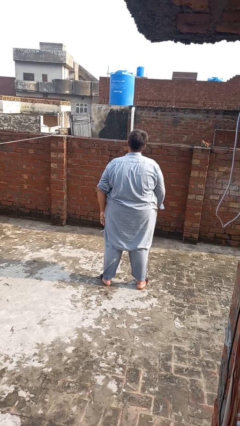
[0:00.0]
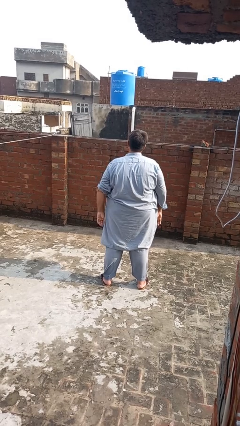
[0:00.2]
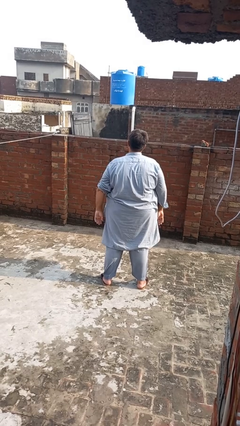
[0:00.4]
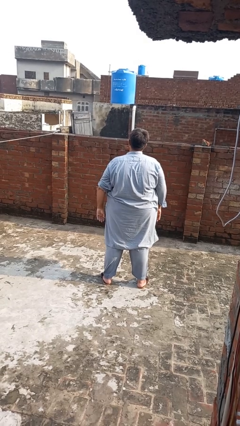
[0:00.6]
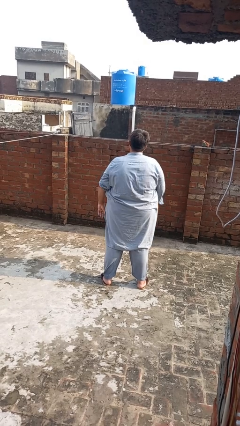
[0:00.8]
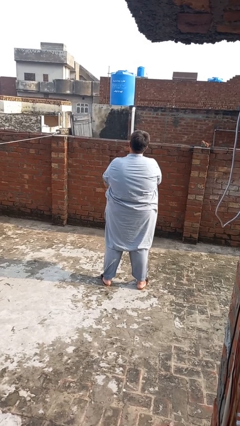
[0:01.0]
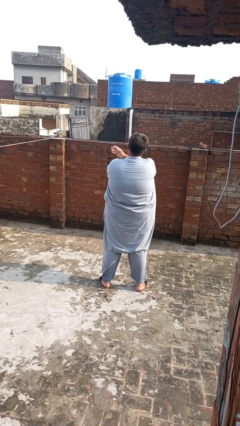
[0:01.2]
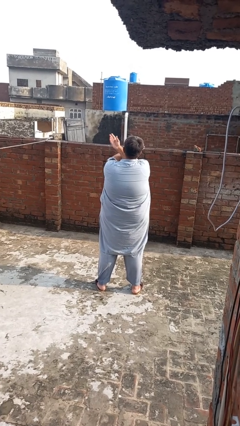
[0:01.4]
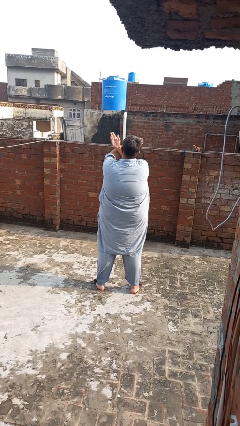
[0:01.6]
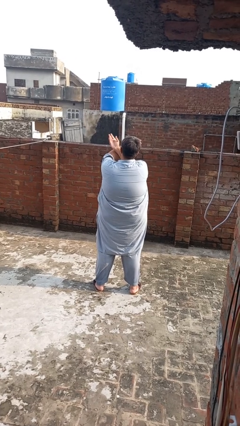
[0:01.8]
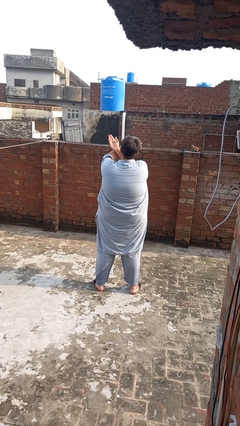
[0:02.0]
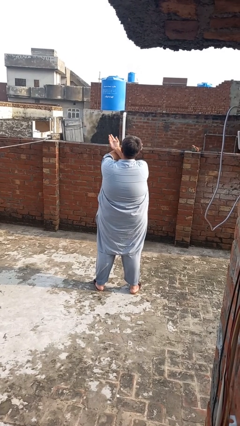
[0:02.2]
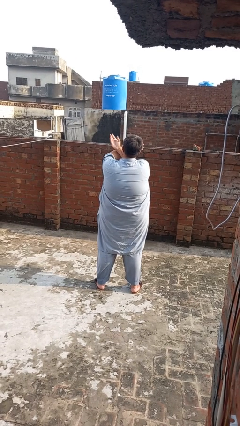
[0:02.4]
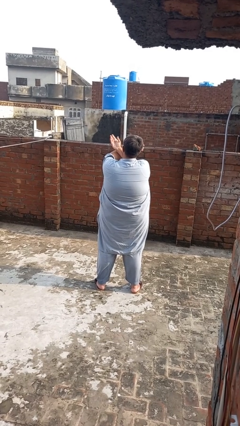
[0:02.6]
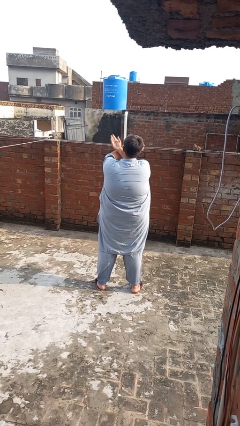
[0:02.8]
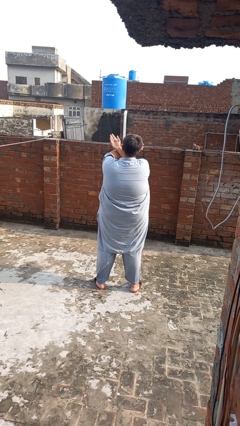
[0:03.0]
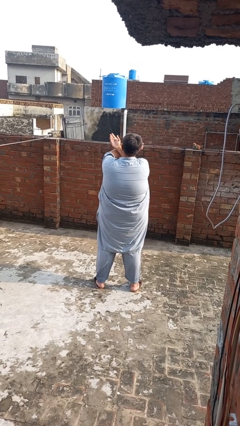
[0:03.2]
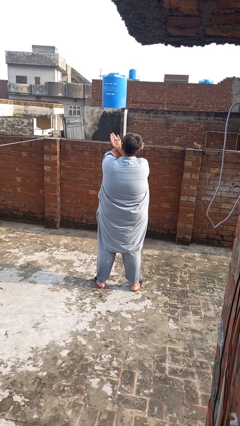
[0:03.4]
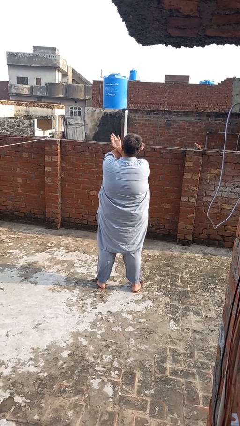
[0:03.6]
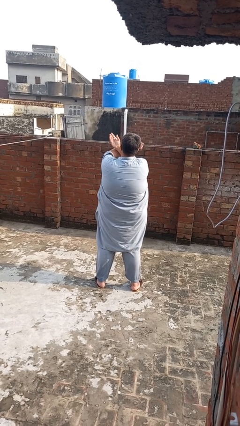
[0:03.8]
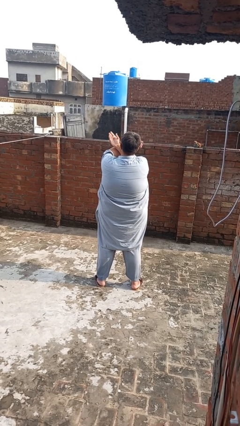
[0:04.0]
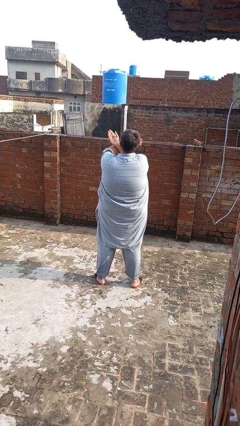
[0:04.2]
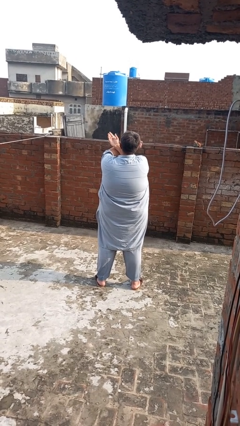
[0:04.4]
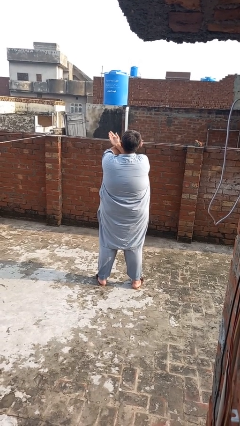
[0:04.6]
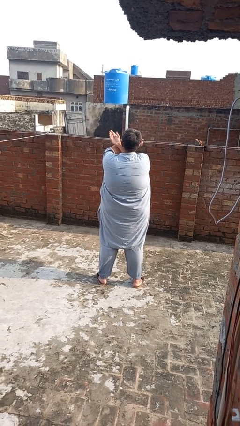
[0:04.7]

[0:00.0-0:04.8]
person gestures arms x

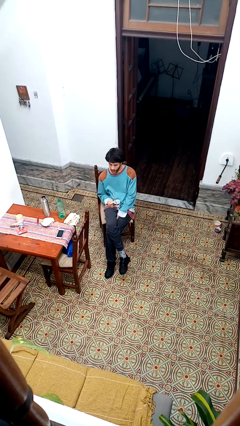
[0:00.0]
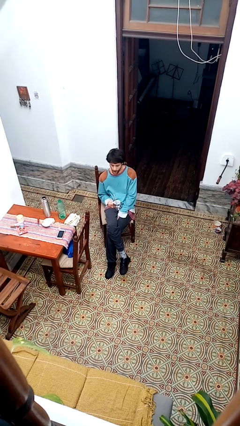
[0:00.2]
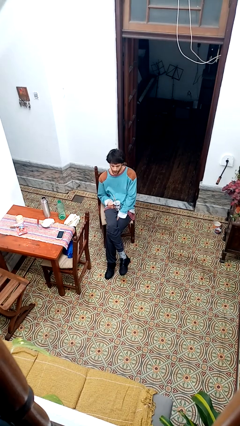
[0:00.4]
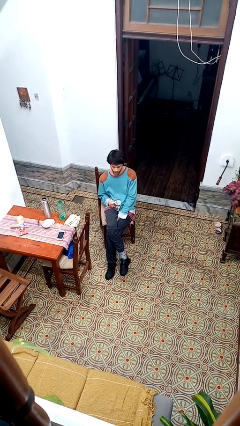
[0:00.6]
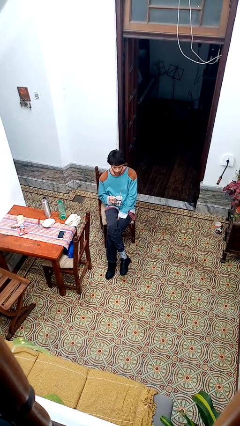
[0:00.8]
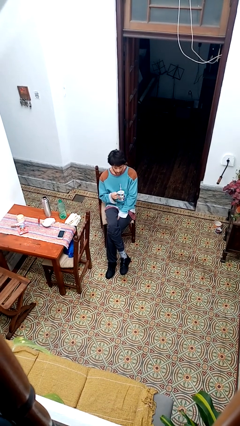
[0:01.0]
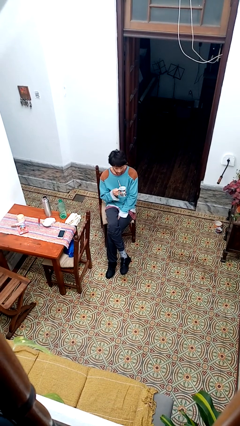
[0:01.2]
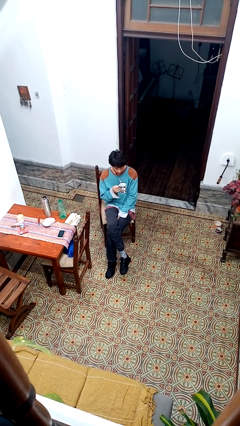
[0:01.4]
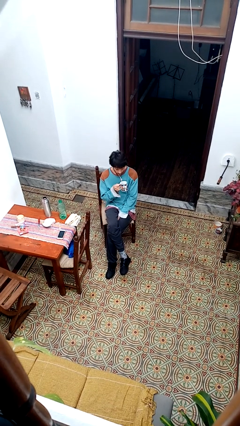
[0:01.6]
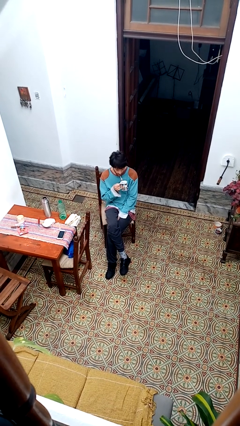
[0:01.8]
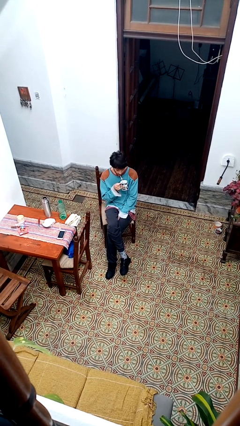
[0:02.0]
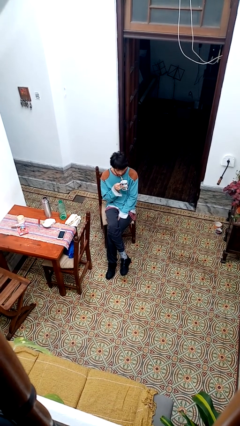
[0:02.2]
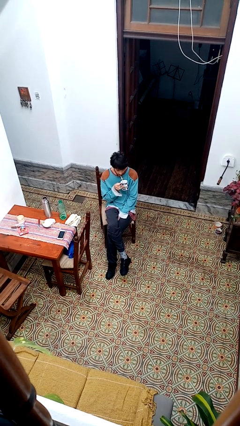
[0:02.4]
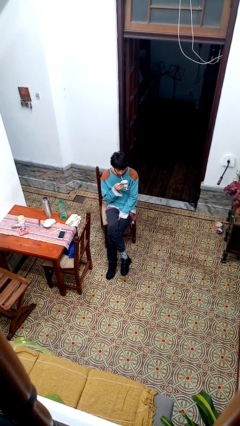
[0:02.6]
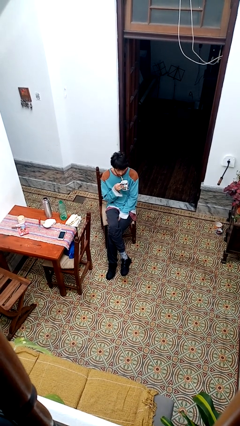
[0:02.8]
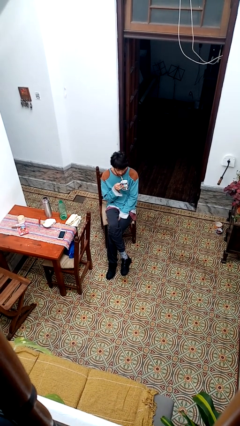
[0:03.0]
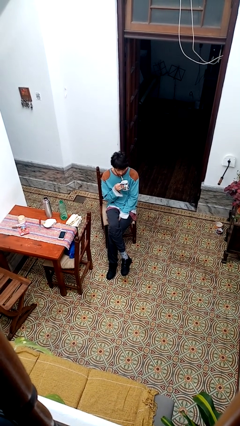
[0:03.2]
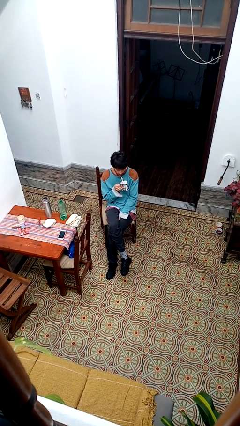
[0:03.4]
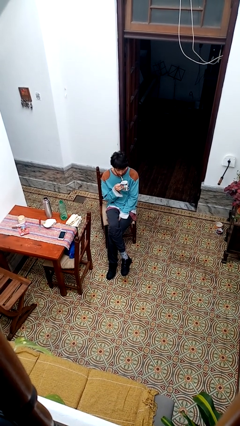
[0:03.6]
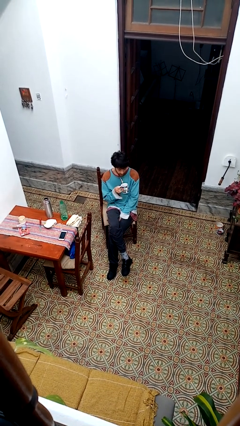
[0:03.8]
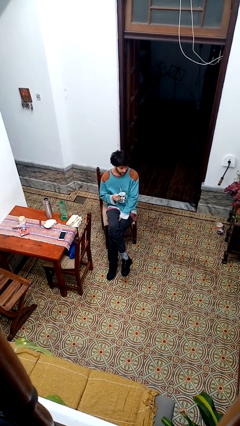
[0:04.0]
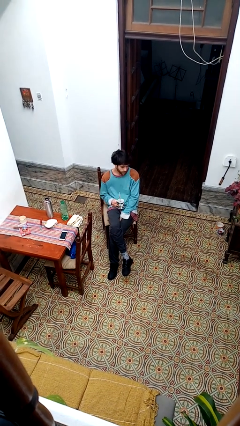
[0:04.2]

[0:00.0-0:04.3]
person drinks from straw

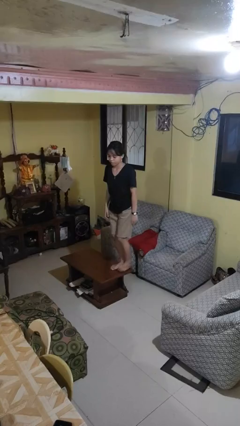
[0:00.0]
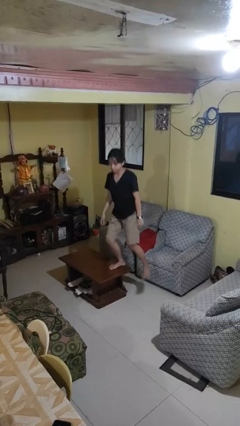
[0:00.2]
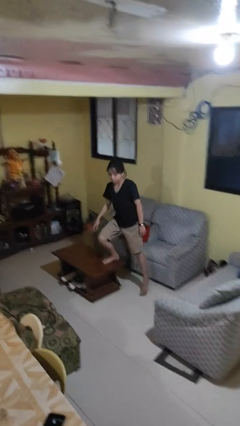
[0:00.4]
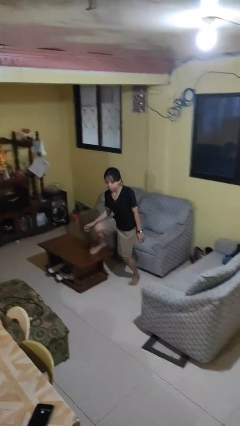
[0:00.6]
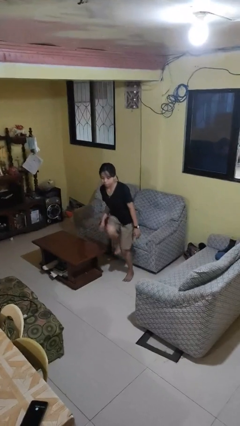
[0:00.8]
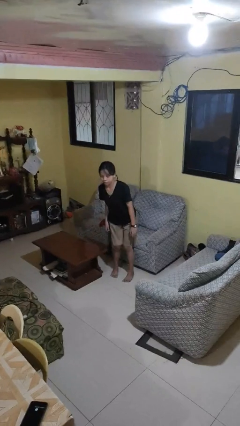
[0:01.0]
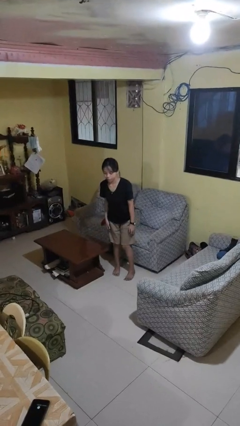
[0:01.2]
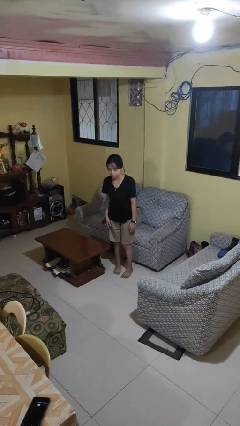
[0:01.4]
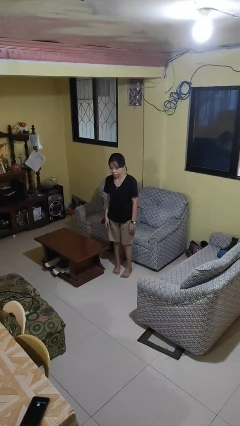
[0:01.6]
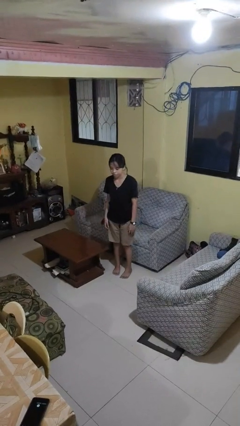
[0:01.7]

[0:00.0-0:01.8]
person climbs off table

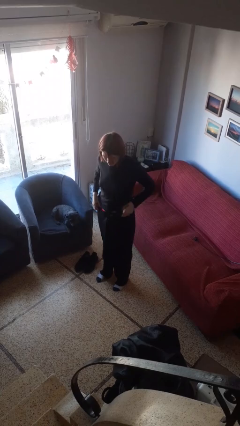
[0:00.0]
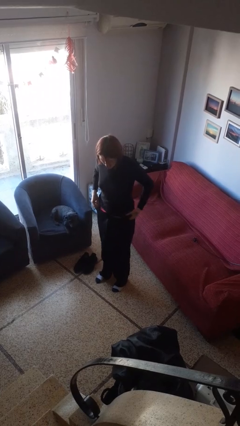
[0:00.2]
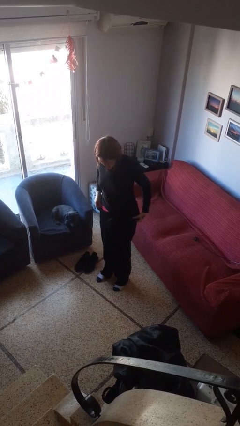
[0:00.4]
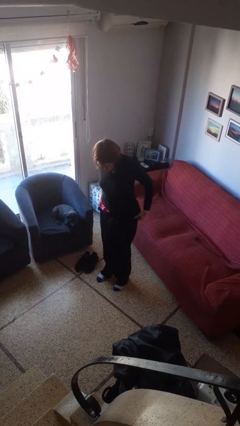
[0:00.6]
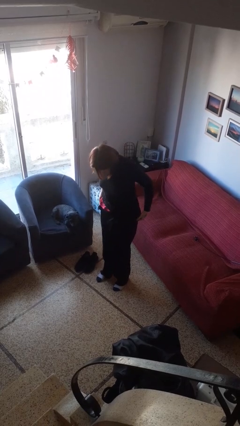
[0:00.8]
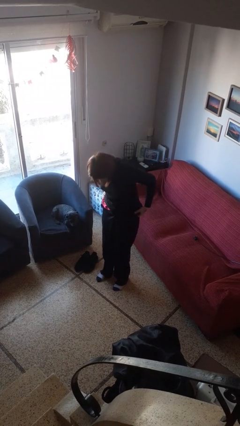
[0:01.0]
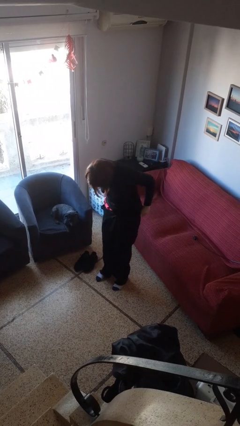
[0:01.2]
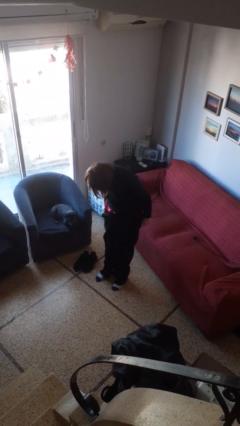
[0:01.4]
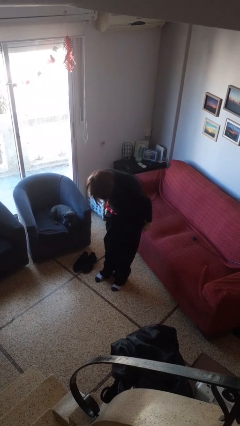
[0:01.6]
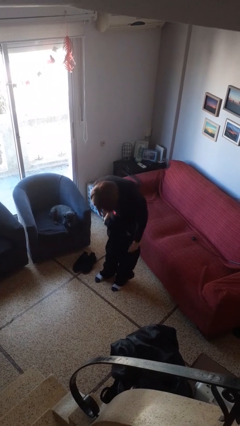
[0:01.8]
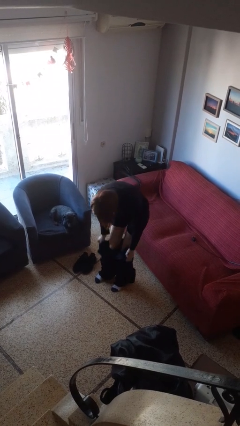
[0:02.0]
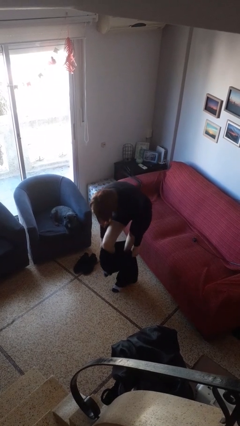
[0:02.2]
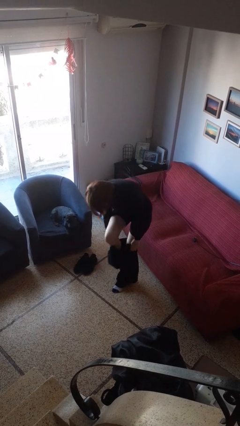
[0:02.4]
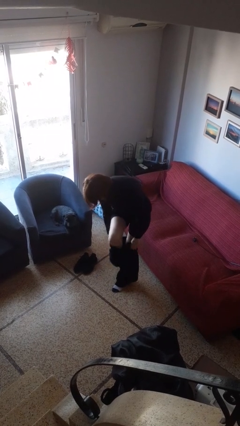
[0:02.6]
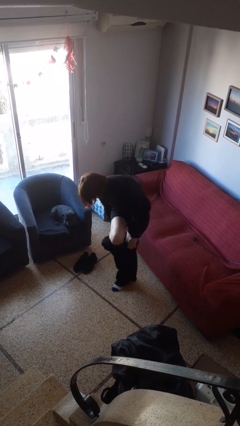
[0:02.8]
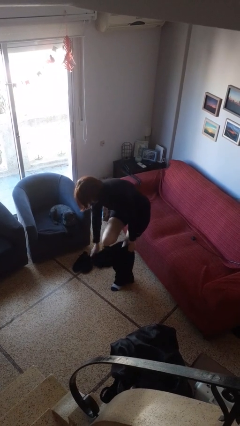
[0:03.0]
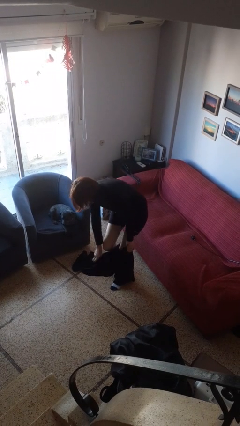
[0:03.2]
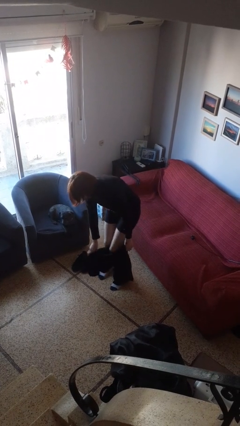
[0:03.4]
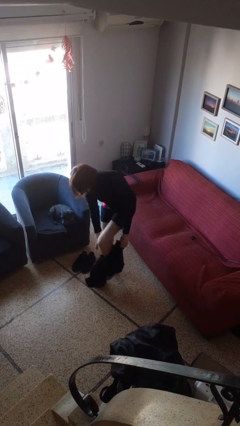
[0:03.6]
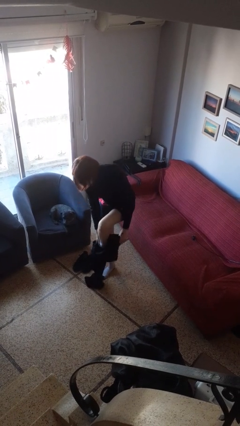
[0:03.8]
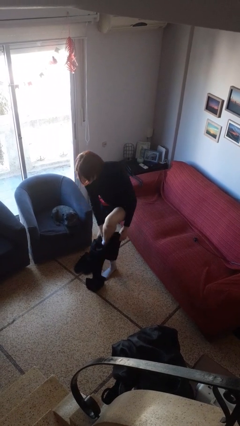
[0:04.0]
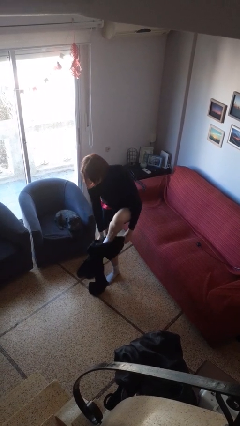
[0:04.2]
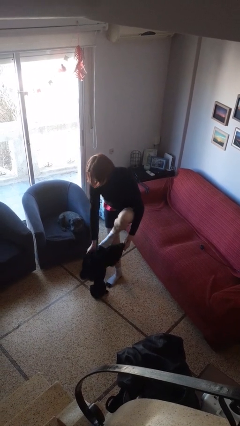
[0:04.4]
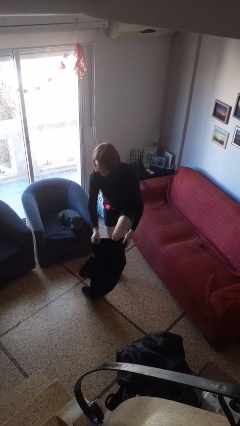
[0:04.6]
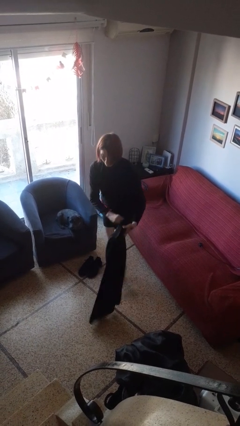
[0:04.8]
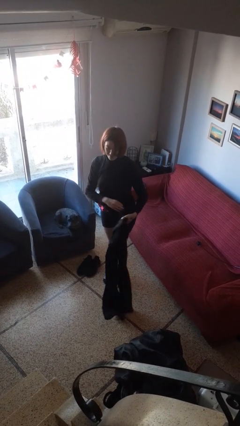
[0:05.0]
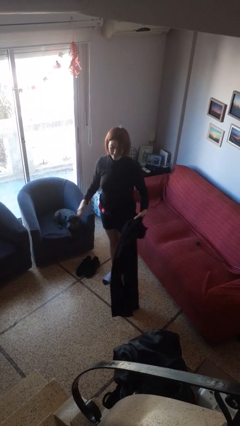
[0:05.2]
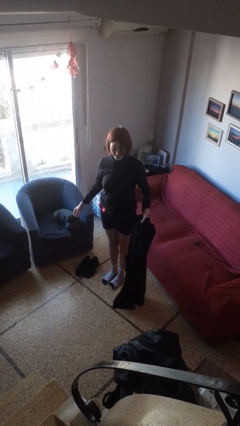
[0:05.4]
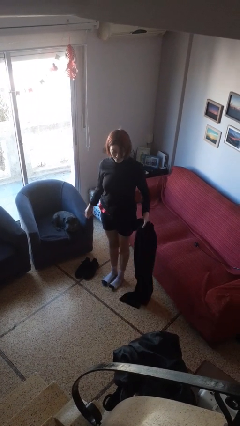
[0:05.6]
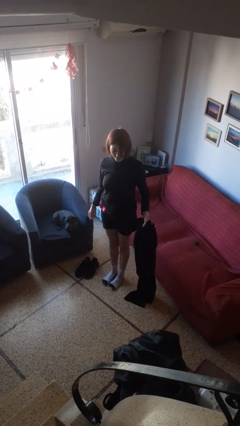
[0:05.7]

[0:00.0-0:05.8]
person takes off pants

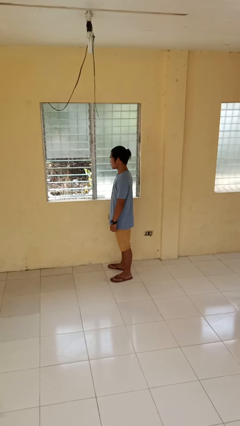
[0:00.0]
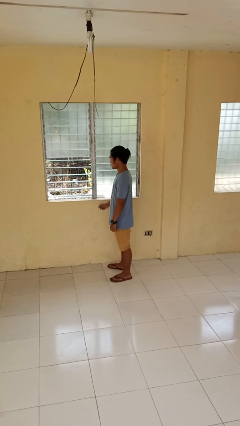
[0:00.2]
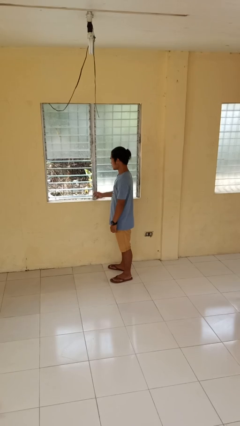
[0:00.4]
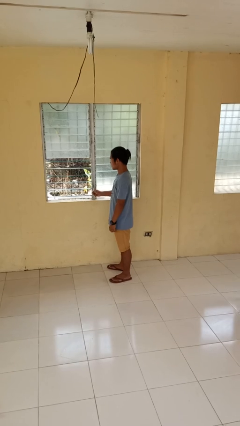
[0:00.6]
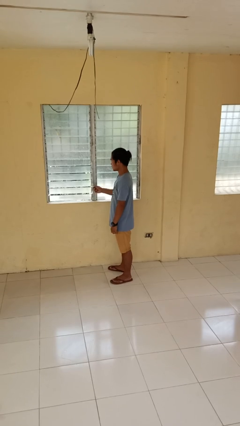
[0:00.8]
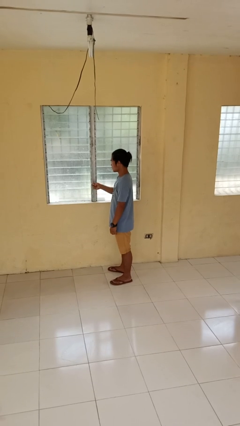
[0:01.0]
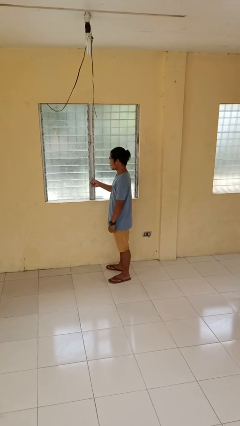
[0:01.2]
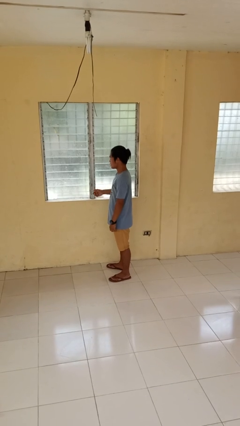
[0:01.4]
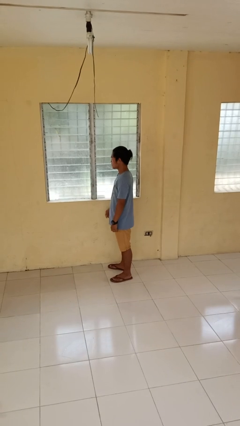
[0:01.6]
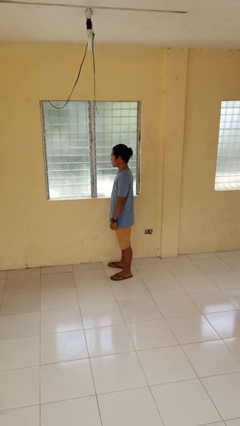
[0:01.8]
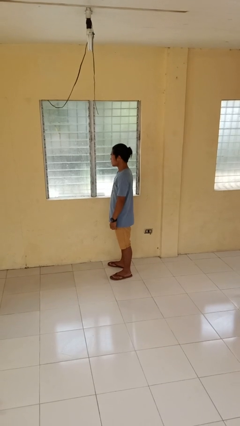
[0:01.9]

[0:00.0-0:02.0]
person closes home window
